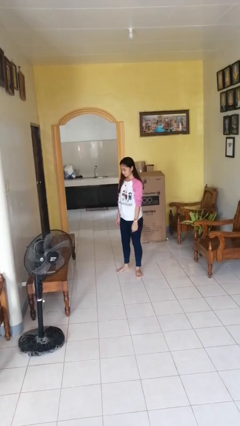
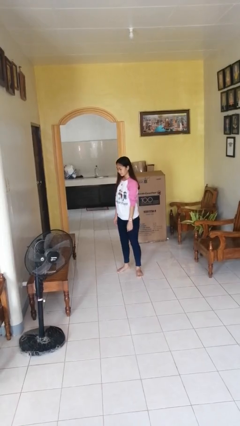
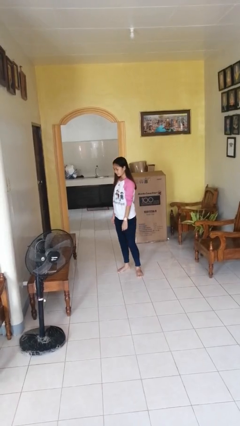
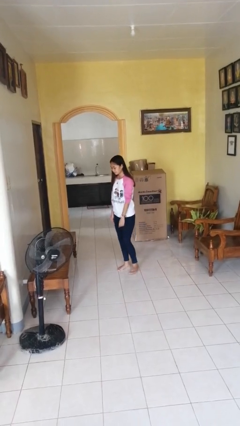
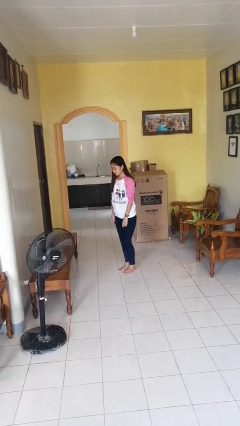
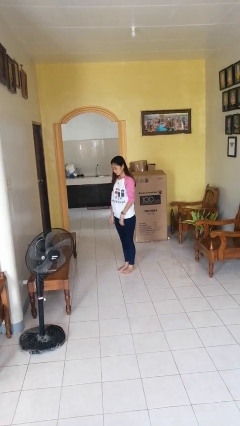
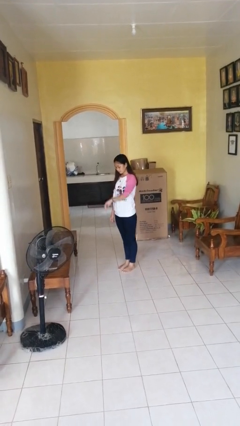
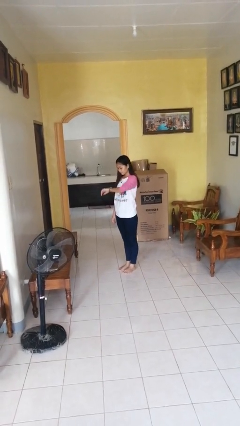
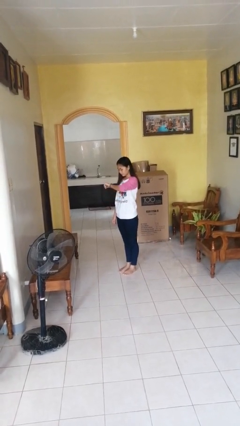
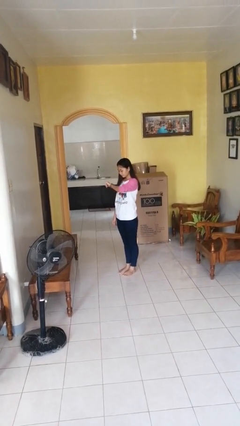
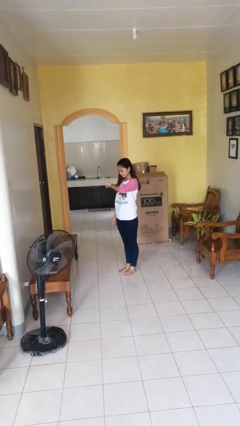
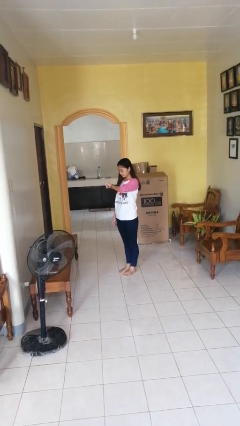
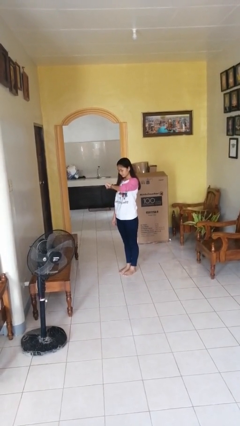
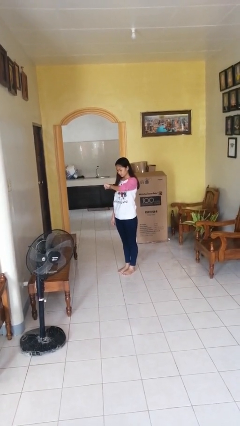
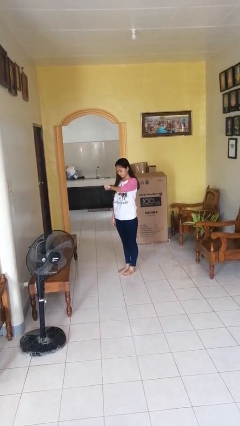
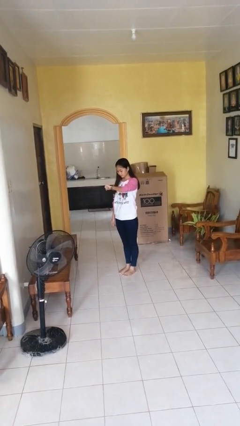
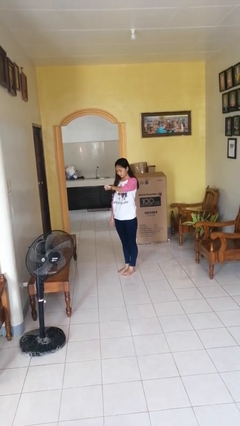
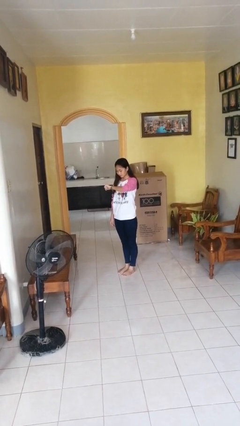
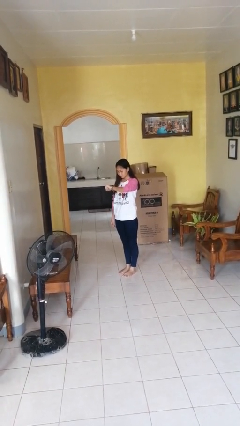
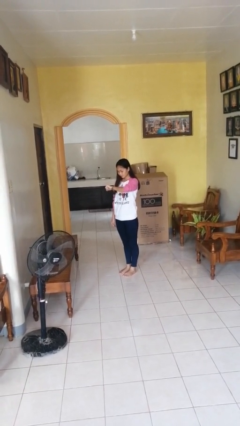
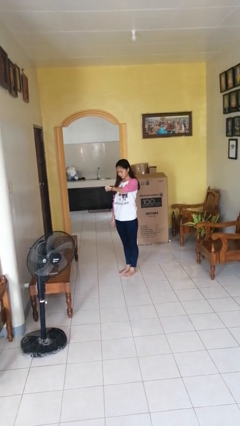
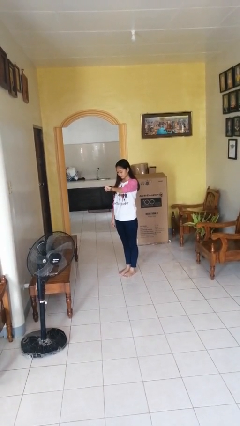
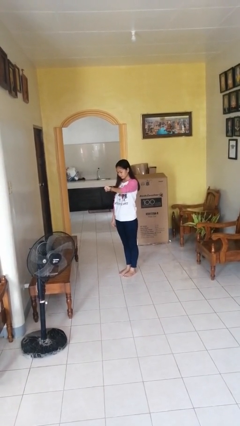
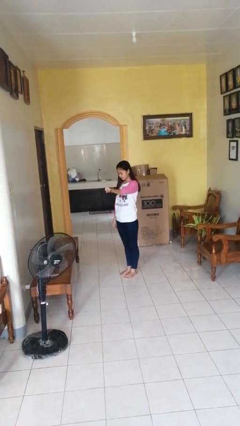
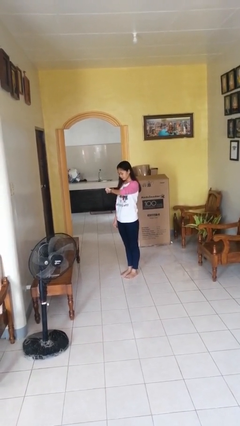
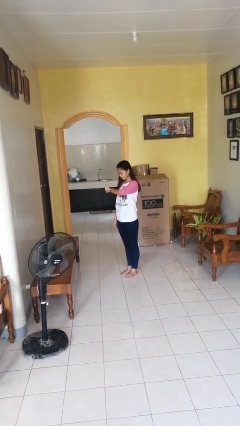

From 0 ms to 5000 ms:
person looks at wristwatch

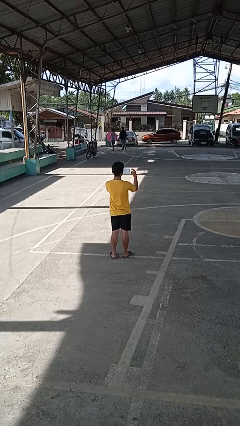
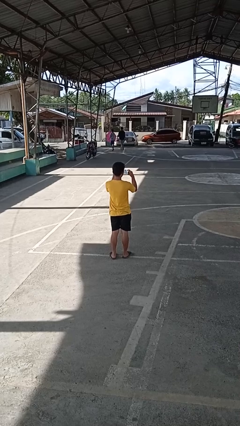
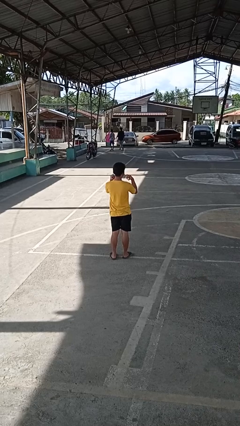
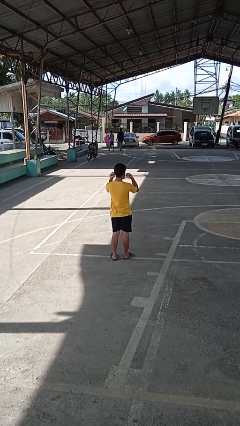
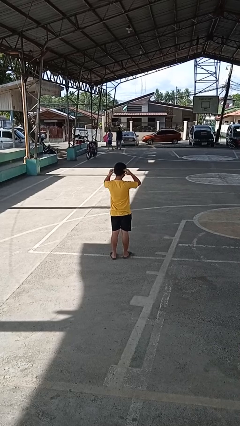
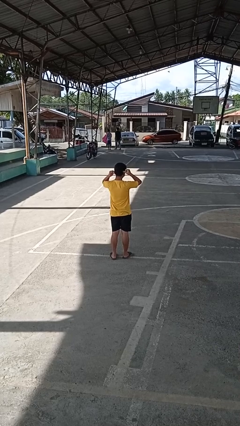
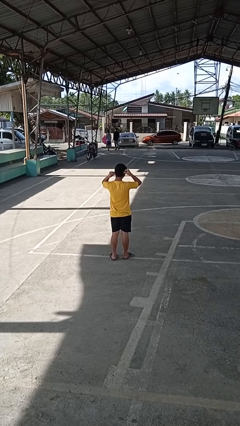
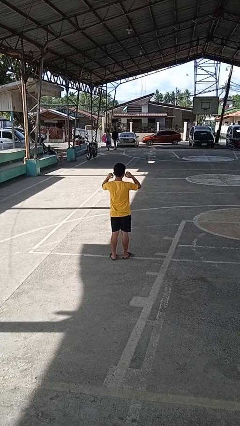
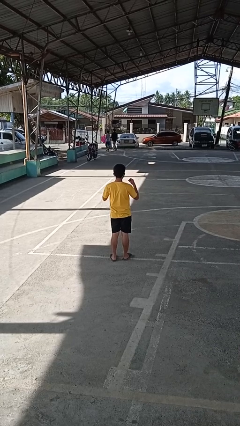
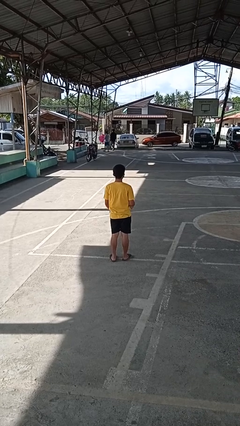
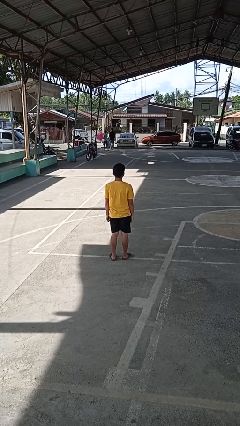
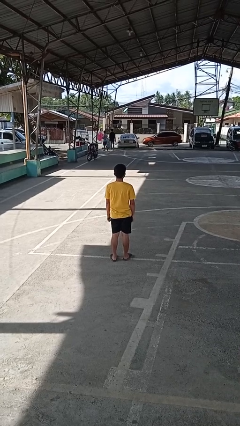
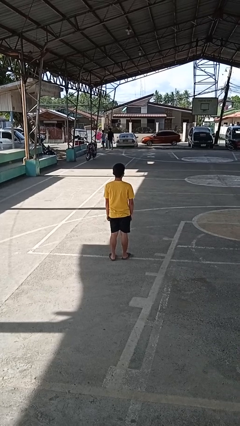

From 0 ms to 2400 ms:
person puts on facemask

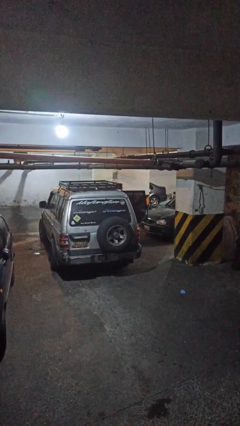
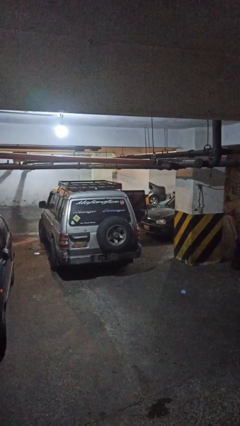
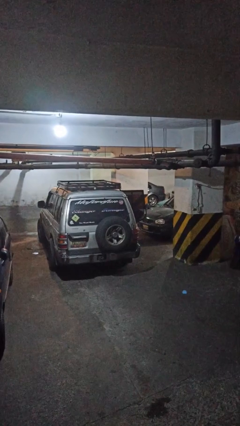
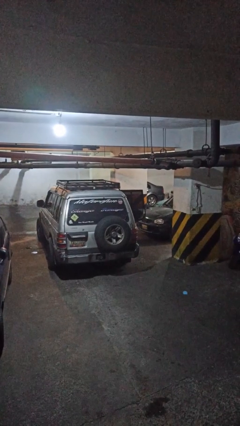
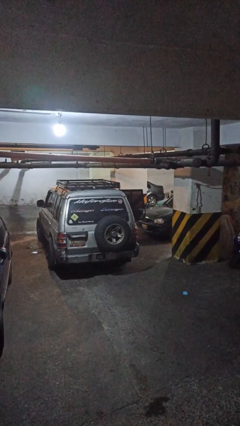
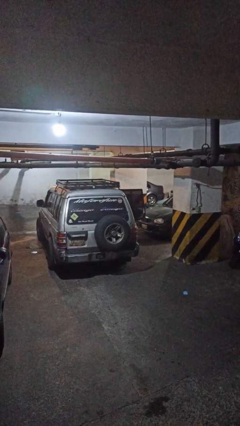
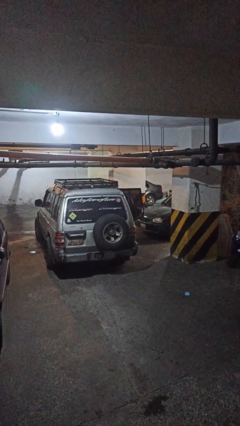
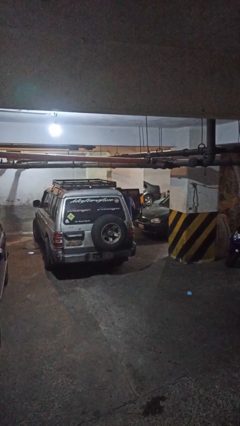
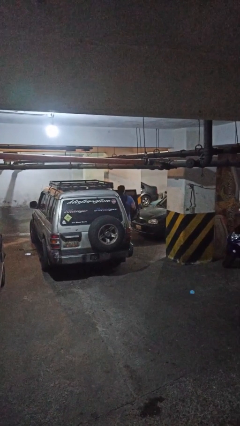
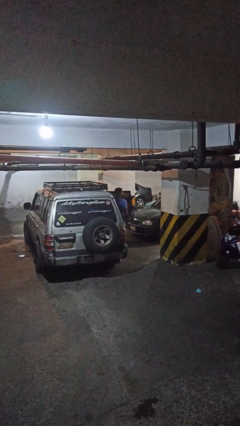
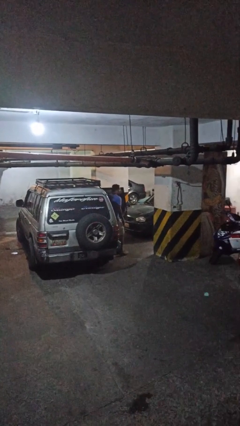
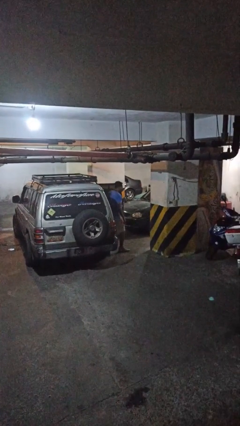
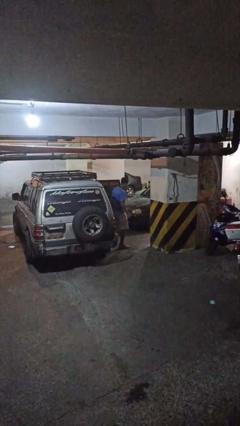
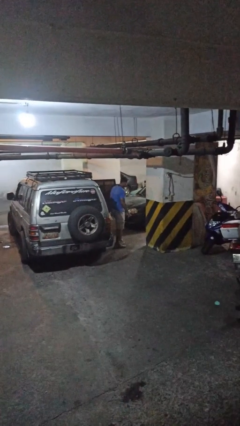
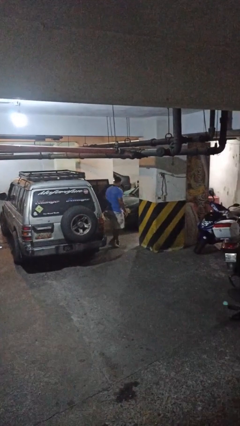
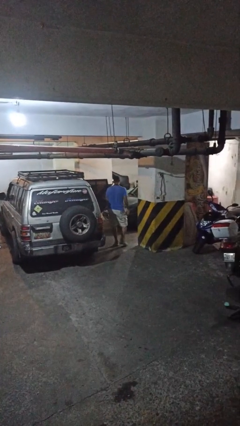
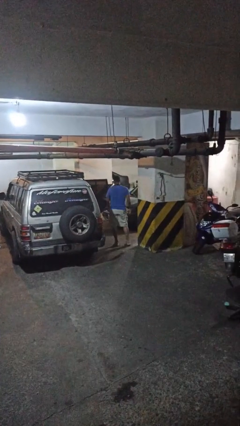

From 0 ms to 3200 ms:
person exits car

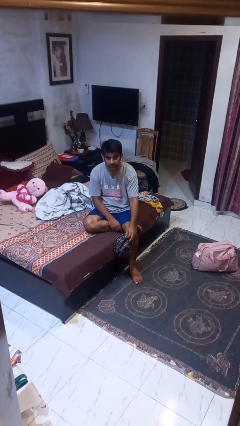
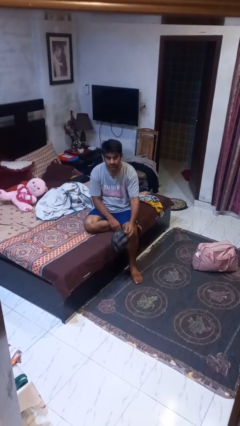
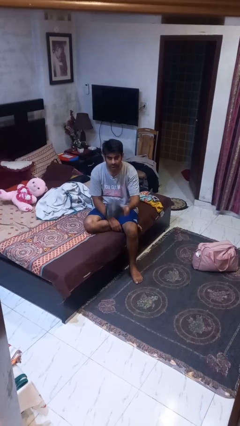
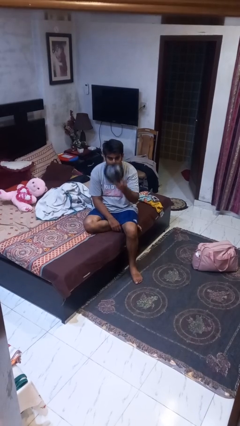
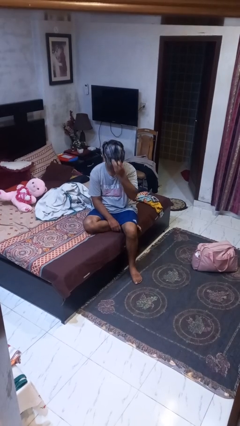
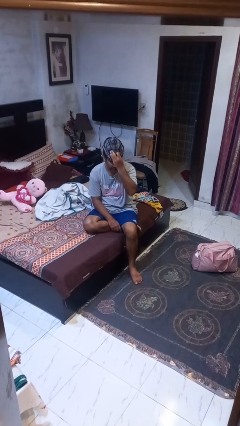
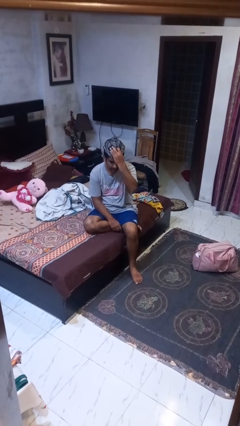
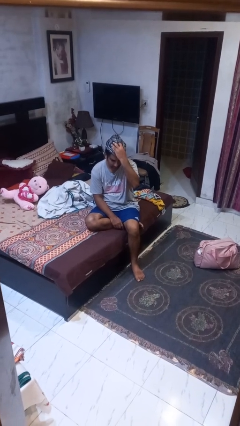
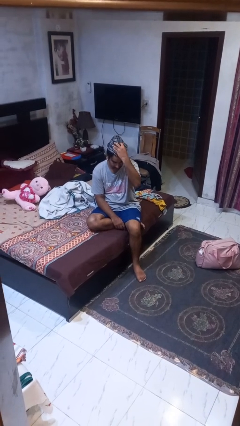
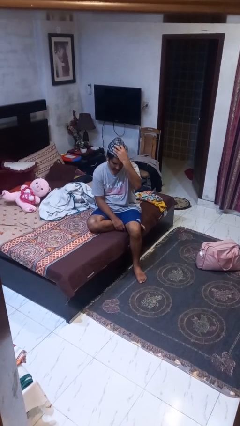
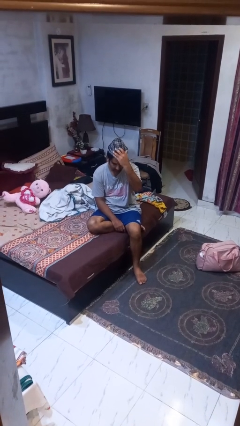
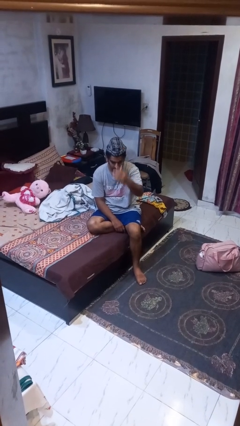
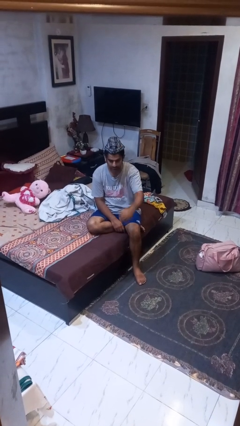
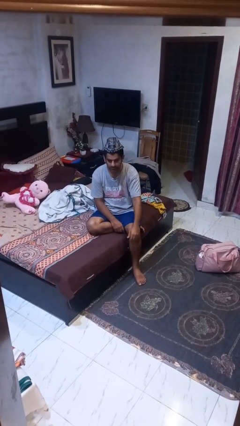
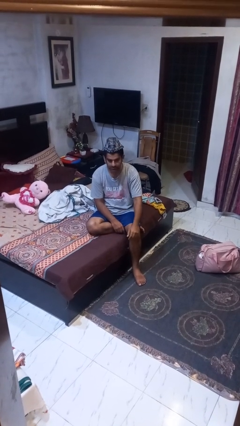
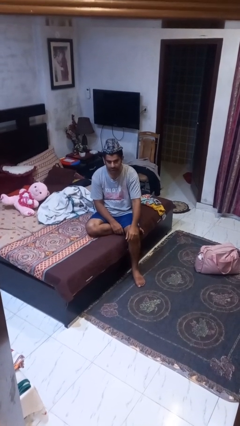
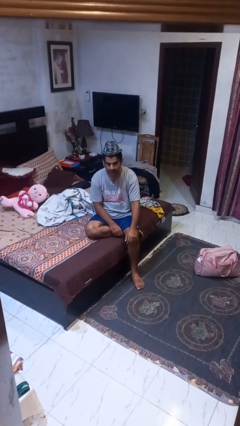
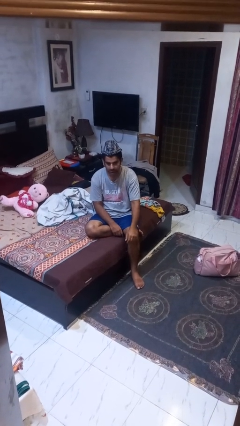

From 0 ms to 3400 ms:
person puts on hat

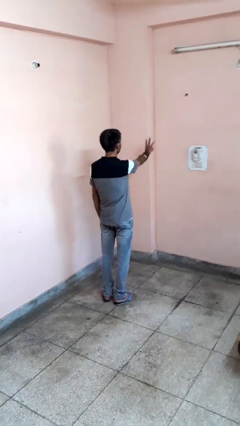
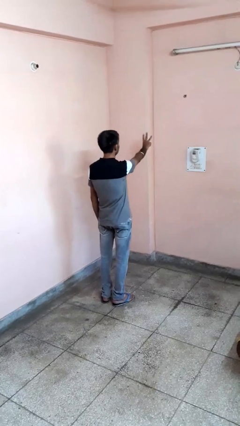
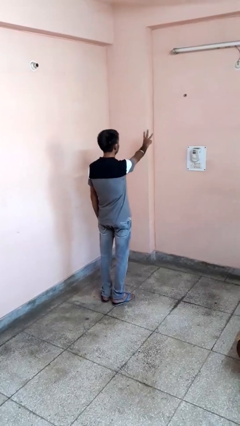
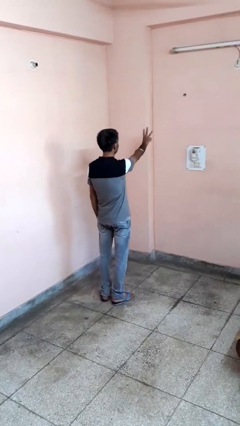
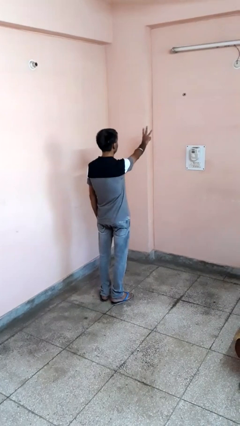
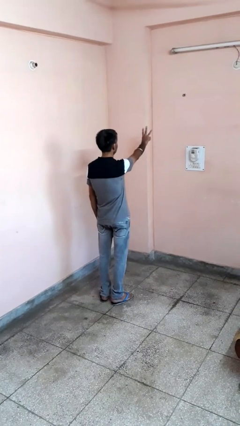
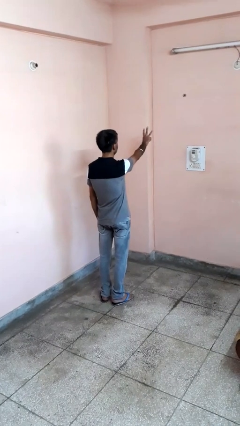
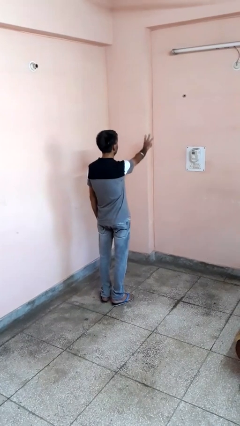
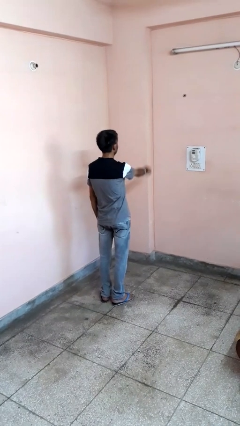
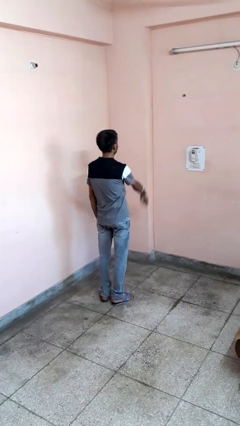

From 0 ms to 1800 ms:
person gestures number three

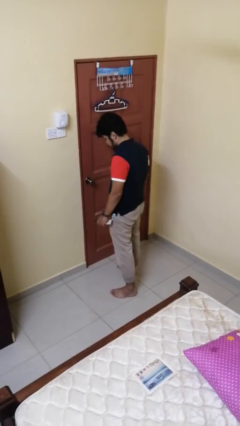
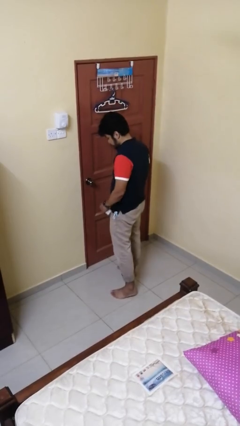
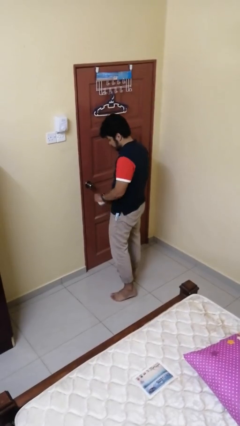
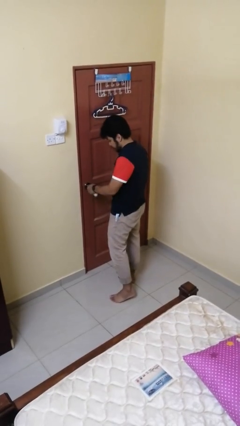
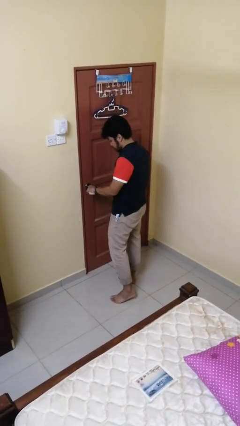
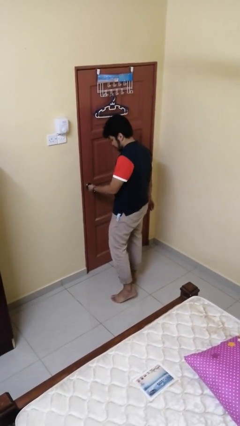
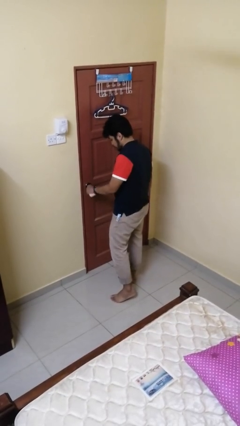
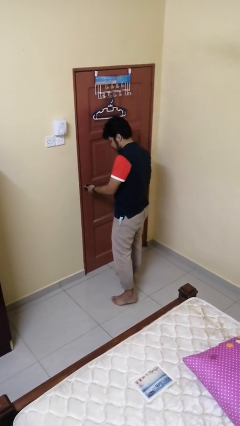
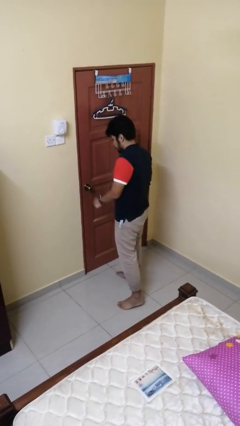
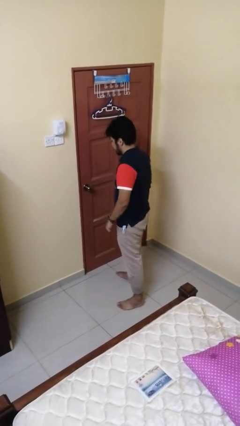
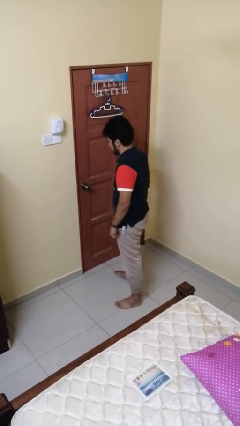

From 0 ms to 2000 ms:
person unlocks door with keys
